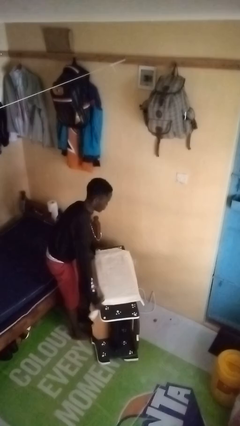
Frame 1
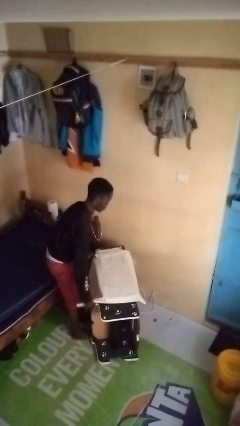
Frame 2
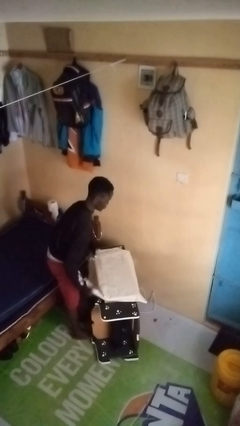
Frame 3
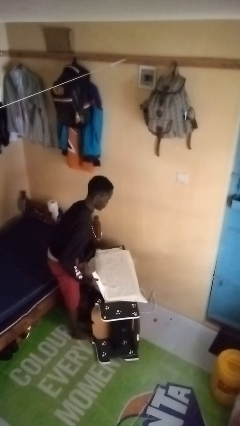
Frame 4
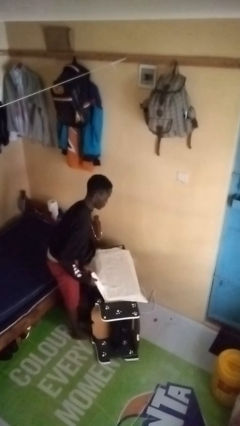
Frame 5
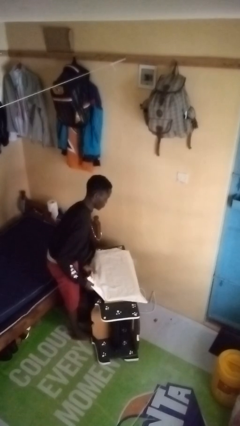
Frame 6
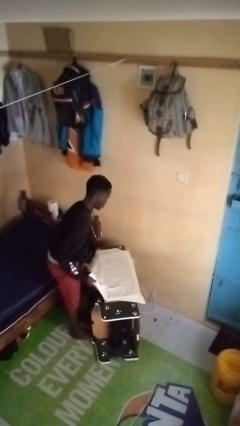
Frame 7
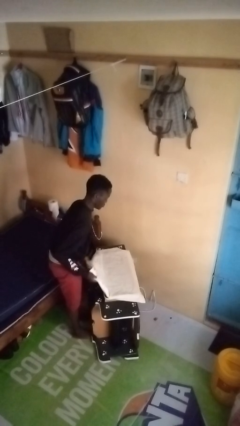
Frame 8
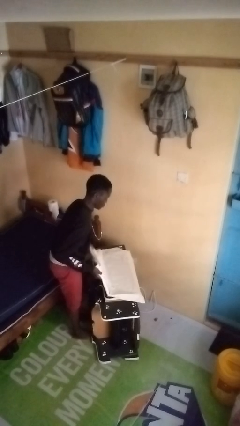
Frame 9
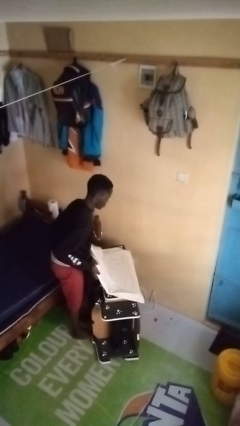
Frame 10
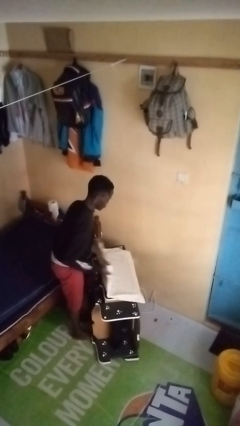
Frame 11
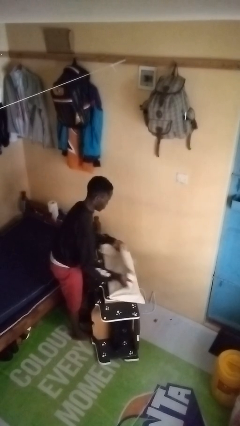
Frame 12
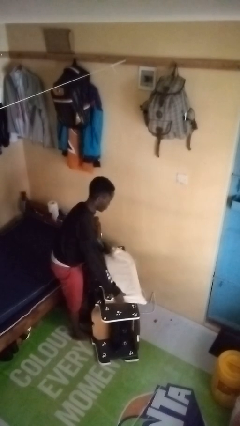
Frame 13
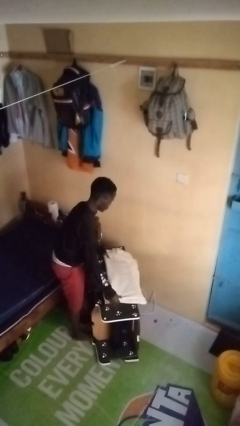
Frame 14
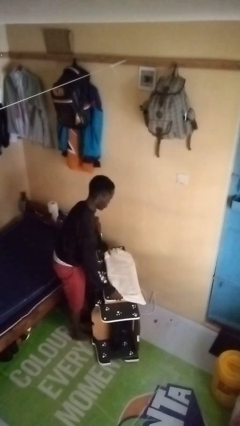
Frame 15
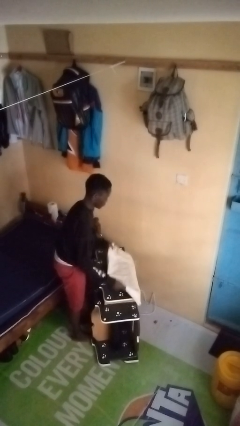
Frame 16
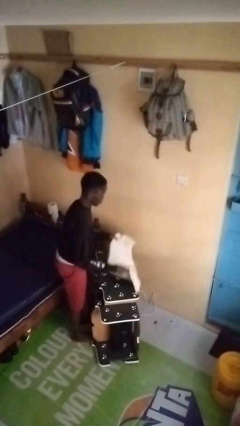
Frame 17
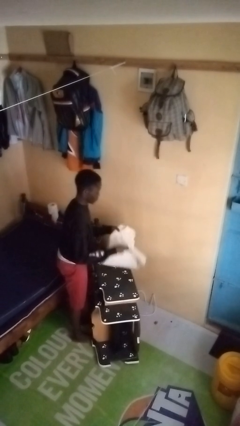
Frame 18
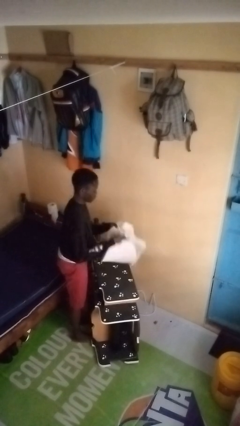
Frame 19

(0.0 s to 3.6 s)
person folds tablecloth

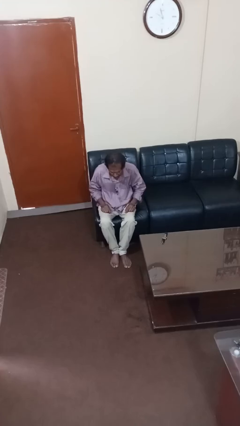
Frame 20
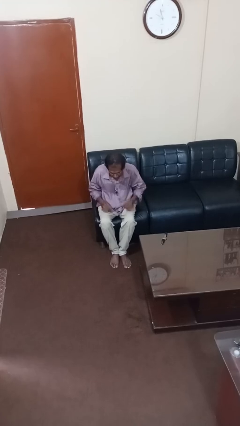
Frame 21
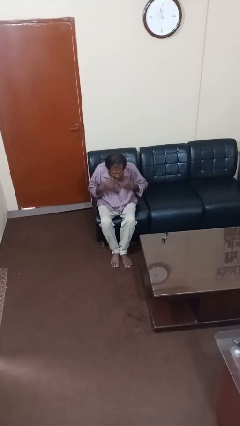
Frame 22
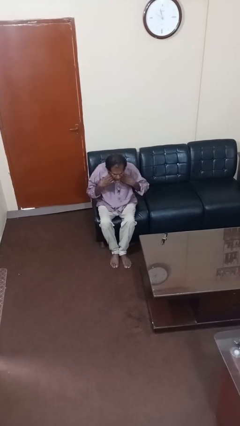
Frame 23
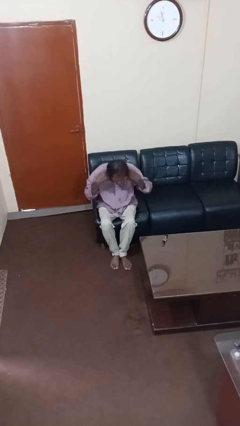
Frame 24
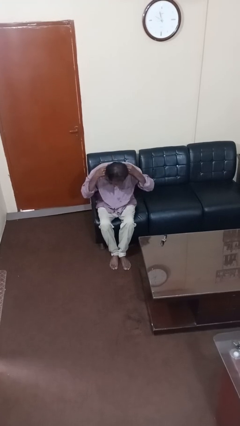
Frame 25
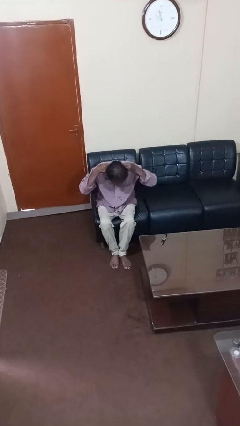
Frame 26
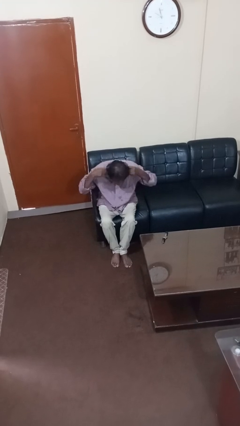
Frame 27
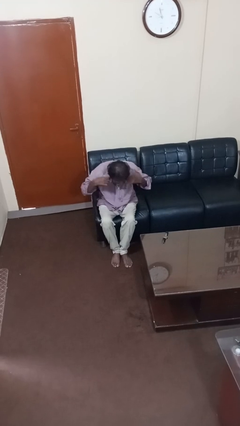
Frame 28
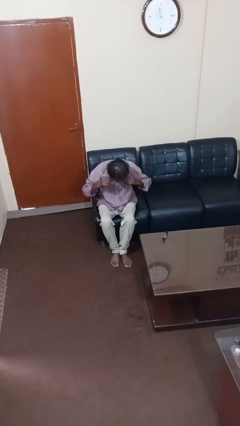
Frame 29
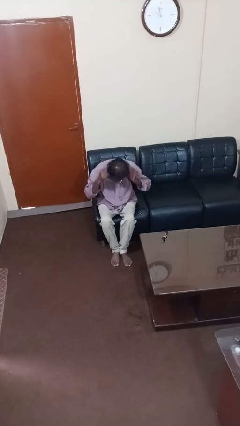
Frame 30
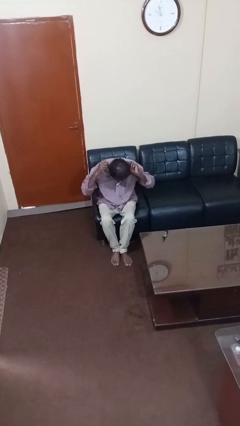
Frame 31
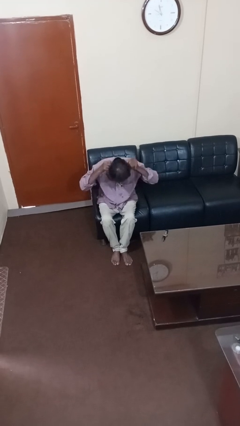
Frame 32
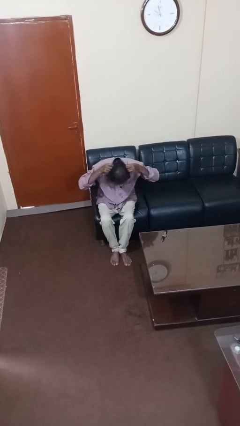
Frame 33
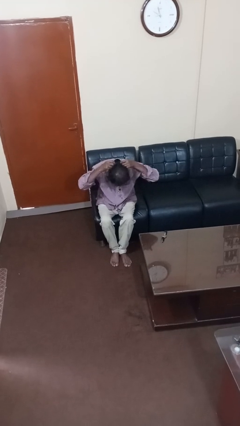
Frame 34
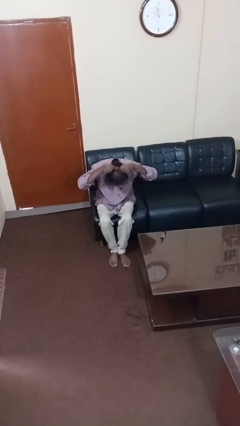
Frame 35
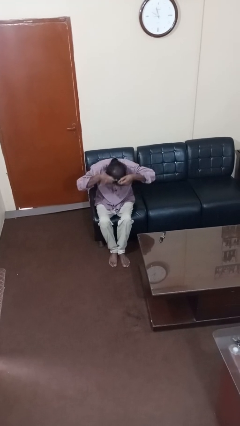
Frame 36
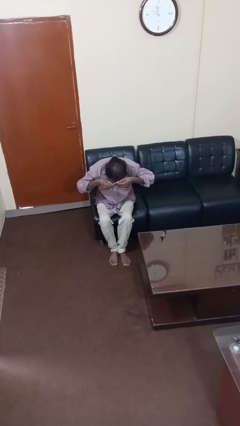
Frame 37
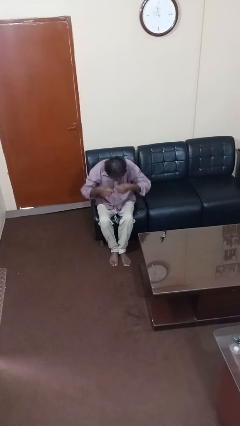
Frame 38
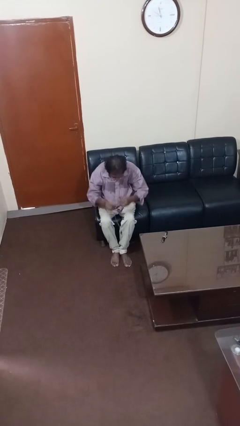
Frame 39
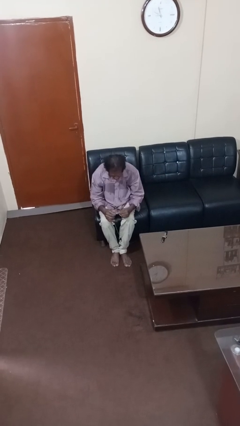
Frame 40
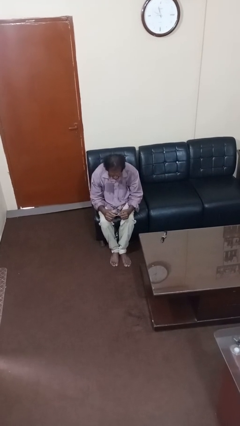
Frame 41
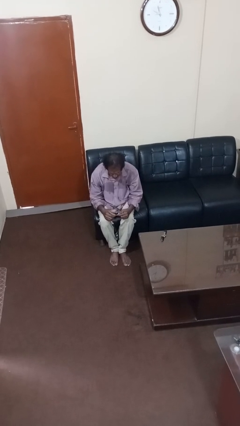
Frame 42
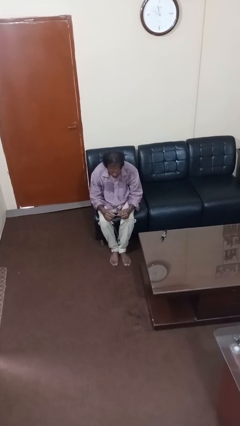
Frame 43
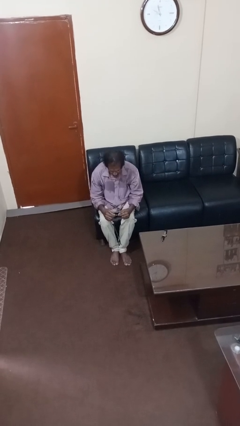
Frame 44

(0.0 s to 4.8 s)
person takes off necklace

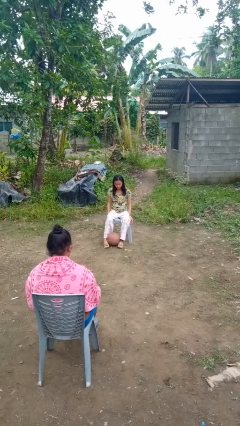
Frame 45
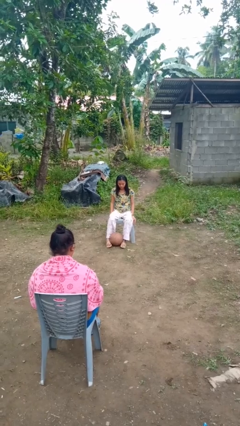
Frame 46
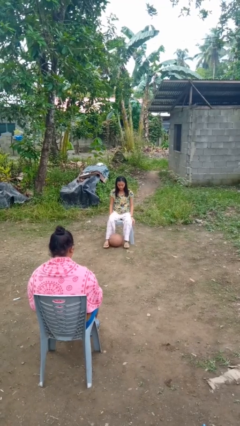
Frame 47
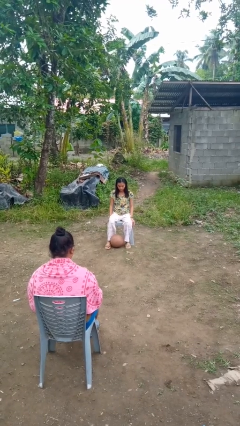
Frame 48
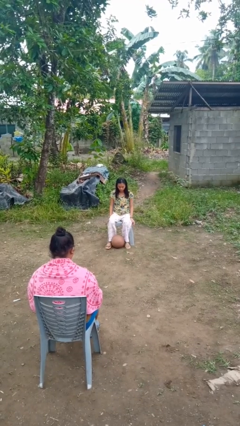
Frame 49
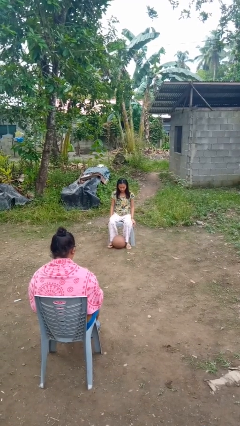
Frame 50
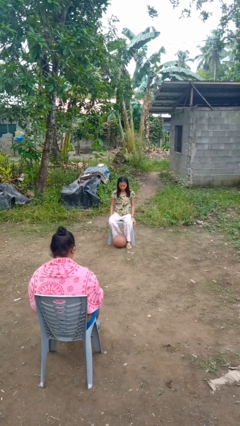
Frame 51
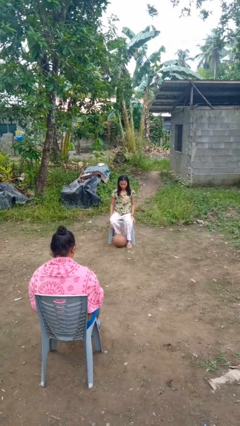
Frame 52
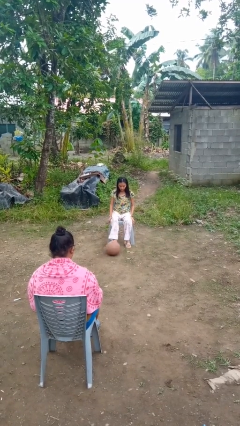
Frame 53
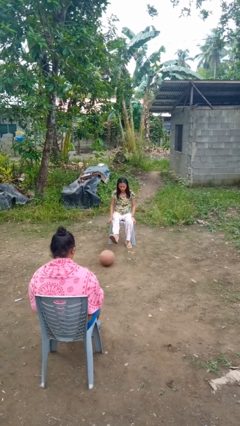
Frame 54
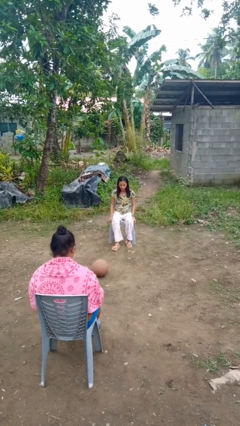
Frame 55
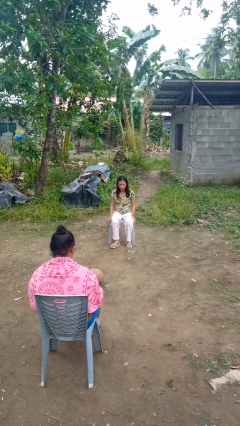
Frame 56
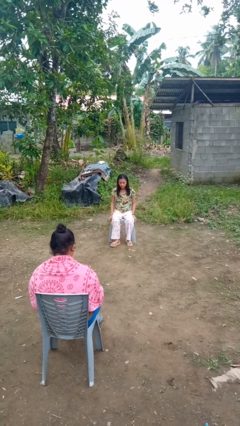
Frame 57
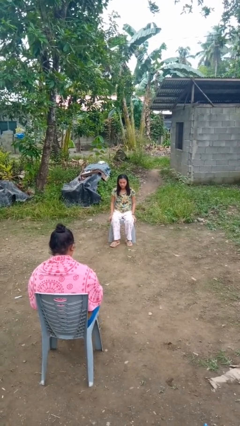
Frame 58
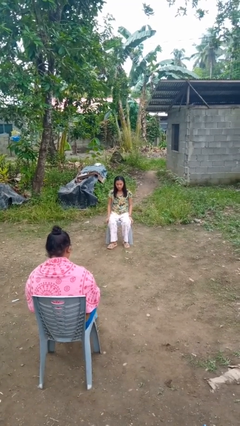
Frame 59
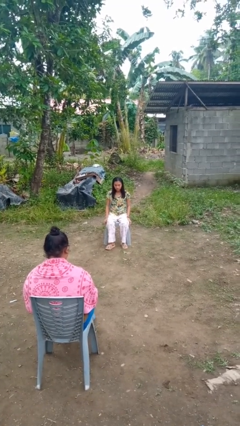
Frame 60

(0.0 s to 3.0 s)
person kicks object to person

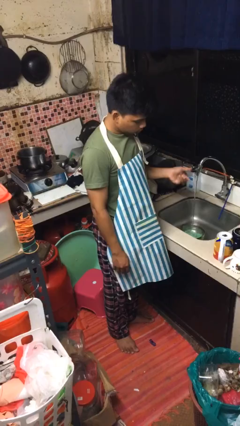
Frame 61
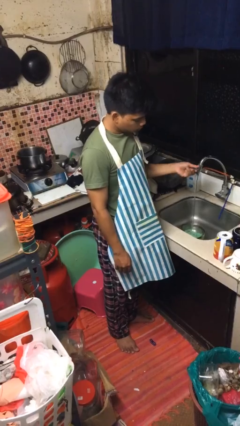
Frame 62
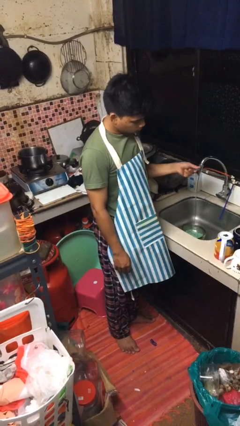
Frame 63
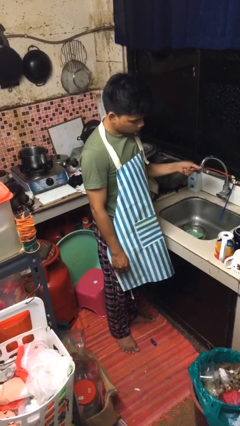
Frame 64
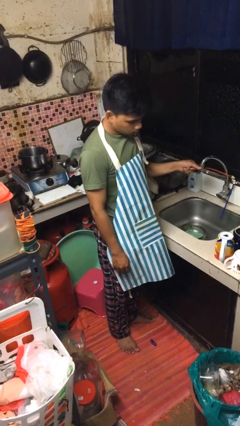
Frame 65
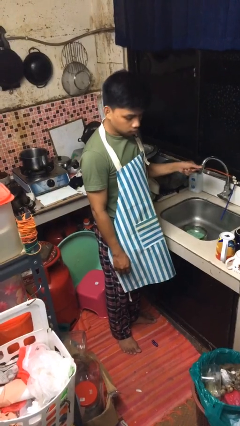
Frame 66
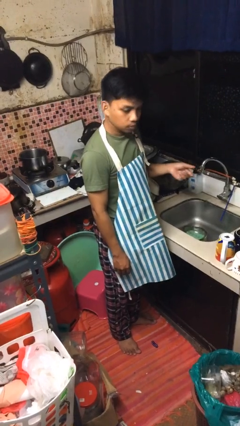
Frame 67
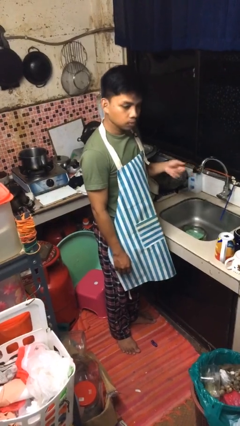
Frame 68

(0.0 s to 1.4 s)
person turns off faucet

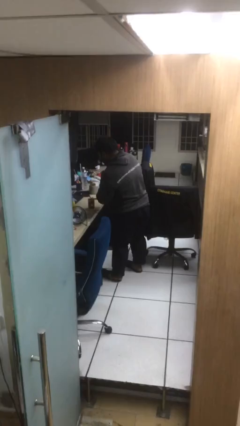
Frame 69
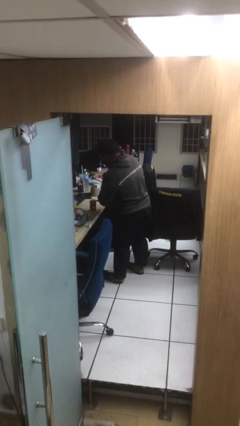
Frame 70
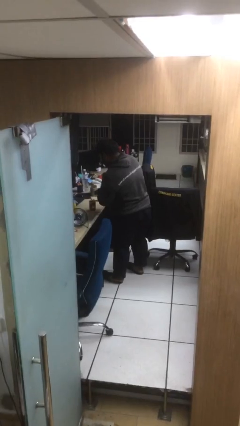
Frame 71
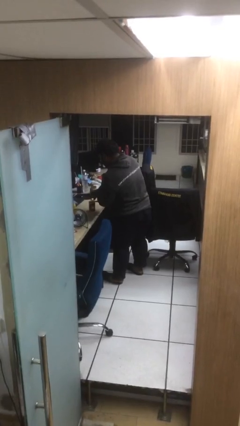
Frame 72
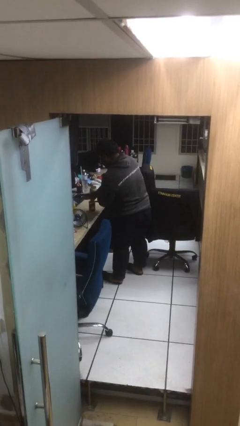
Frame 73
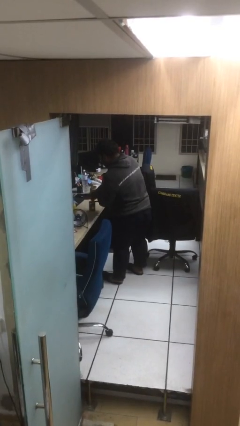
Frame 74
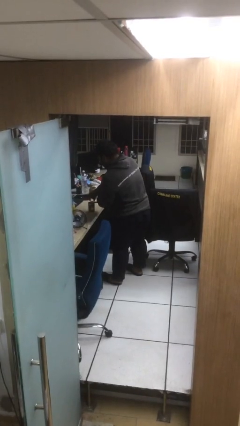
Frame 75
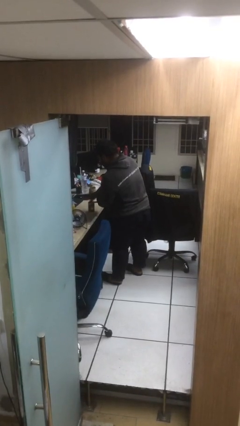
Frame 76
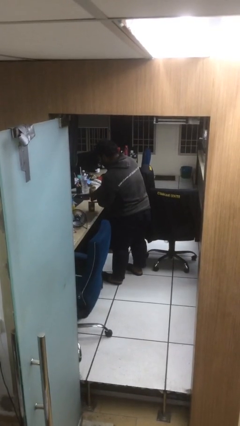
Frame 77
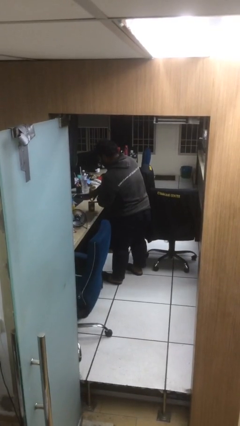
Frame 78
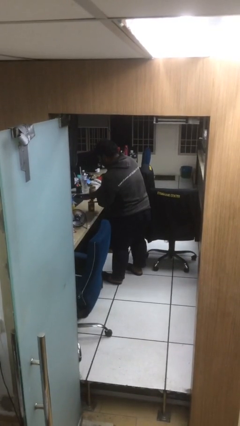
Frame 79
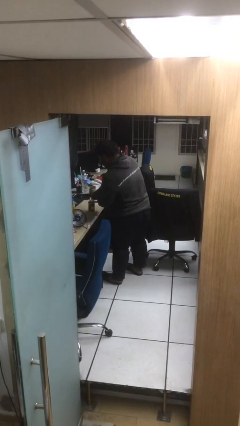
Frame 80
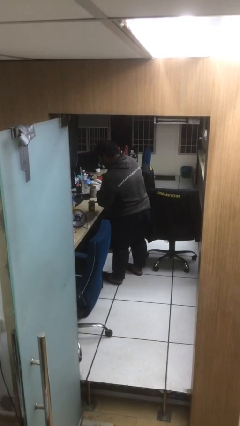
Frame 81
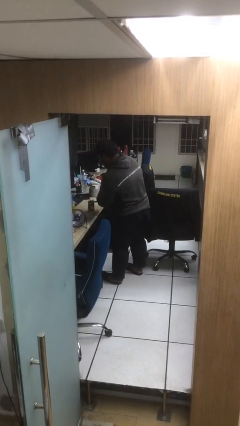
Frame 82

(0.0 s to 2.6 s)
person opens can with can opener

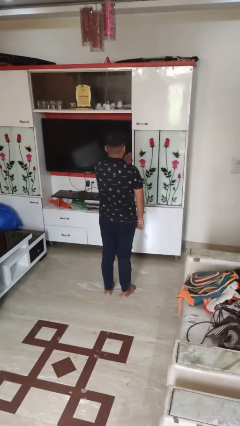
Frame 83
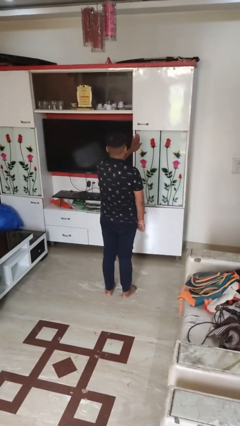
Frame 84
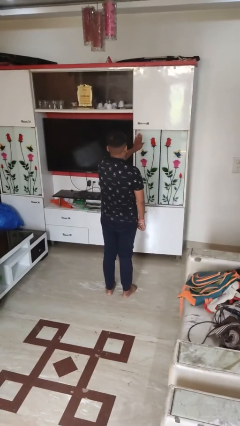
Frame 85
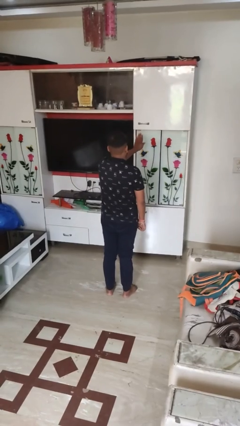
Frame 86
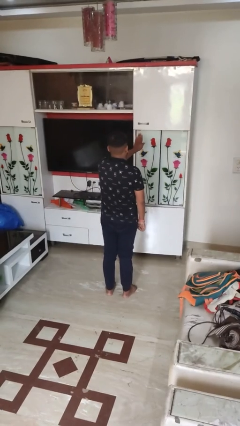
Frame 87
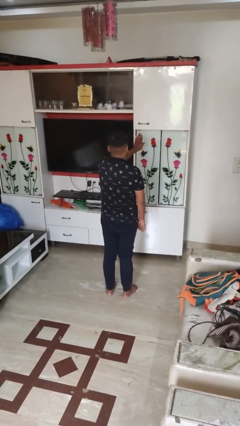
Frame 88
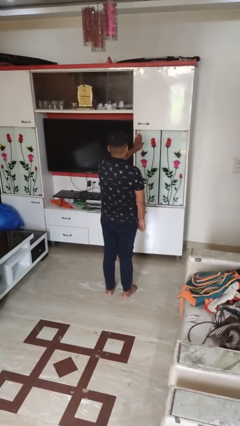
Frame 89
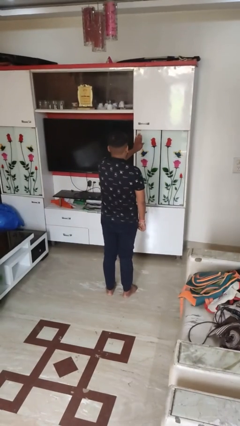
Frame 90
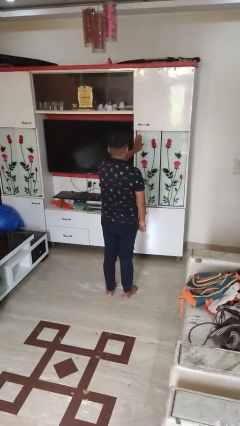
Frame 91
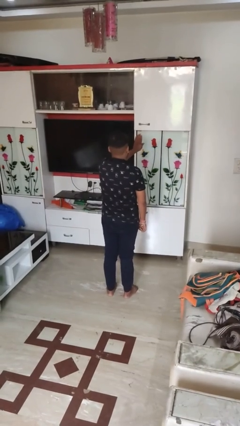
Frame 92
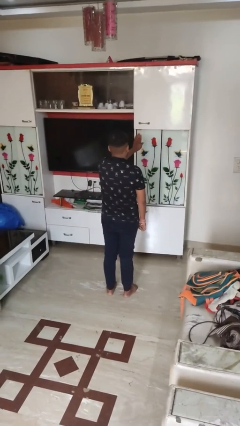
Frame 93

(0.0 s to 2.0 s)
person gestures stop
